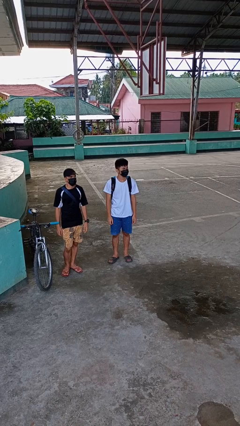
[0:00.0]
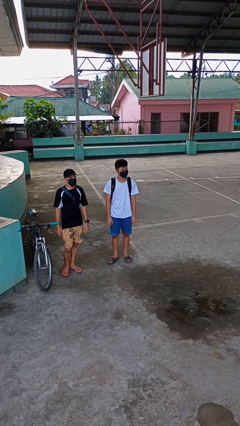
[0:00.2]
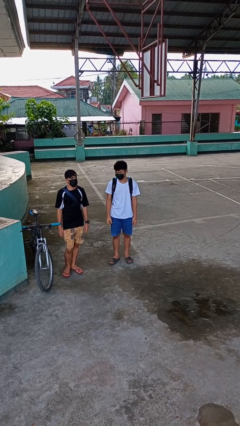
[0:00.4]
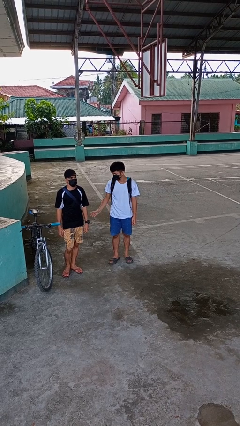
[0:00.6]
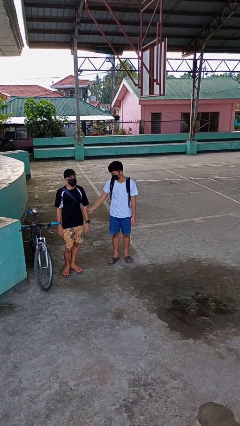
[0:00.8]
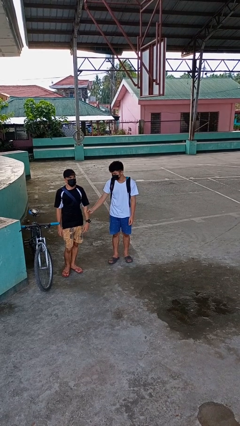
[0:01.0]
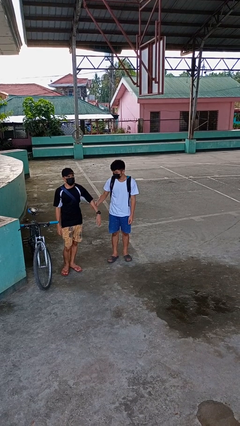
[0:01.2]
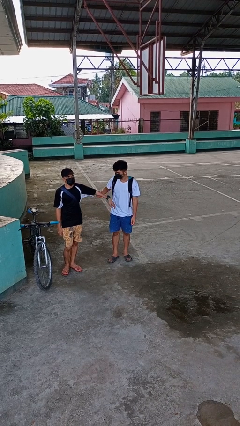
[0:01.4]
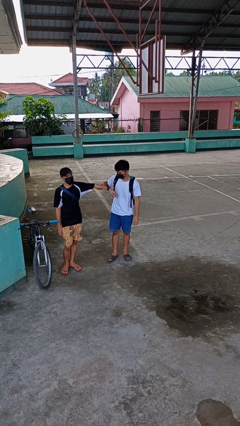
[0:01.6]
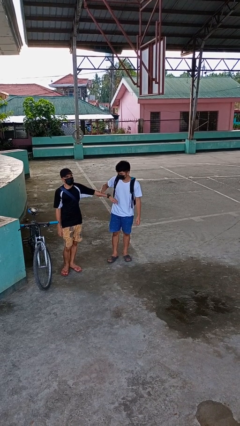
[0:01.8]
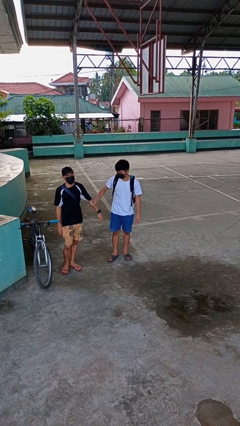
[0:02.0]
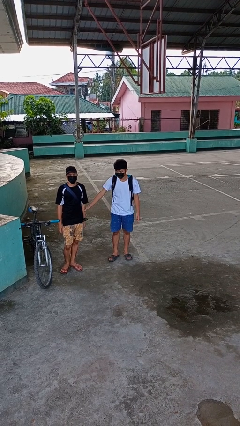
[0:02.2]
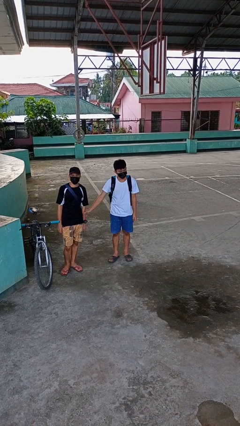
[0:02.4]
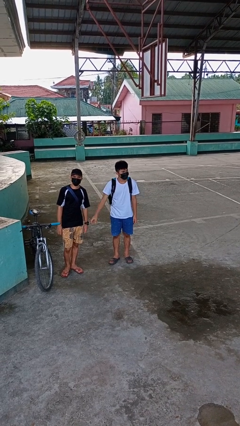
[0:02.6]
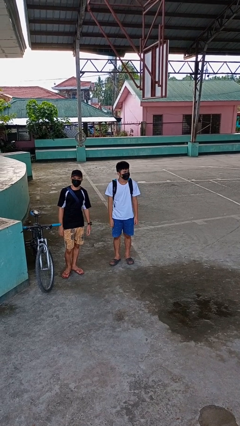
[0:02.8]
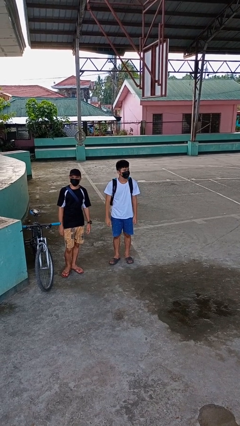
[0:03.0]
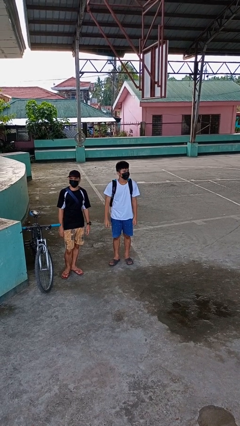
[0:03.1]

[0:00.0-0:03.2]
person grabs person by forearm

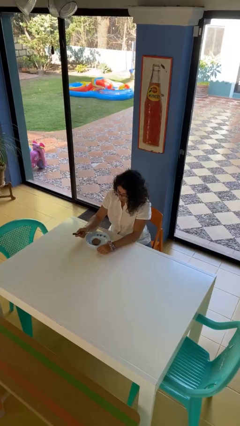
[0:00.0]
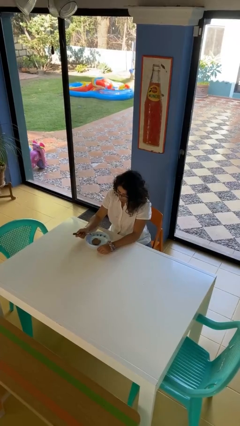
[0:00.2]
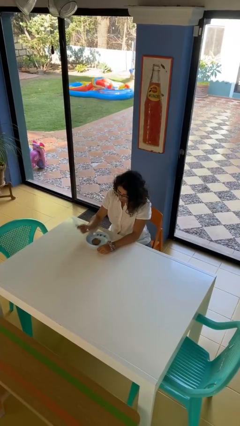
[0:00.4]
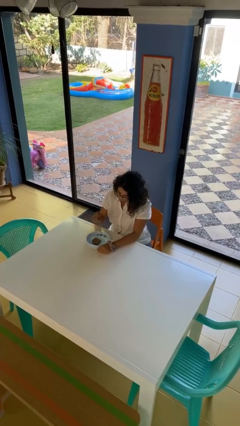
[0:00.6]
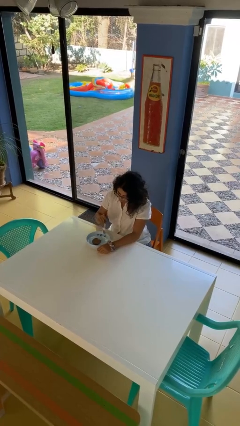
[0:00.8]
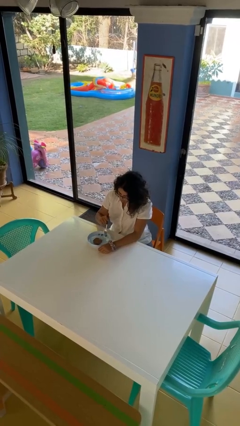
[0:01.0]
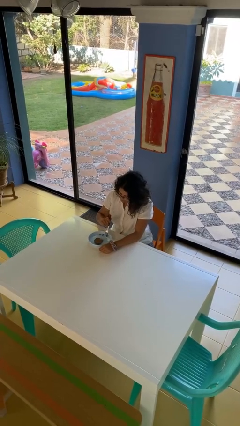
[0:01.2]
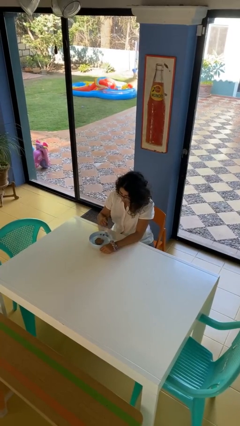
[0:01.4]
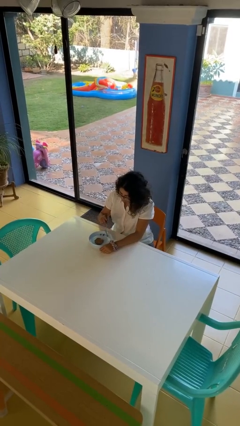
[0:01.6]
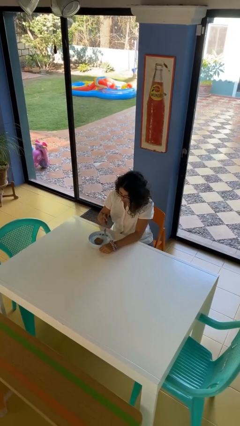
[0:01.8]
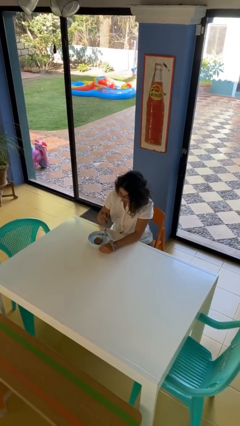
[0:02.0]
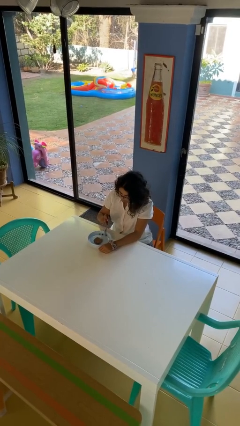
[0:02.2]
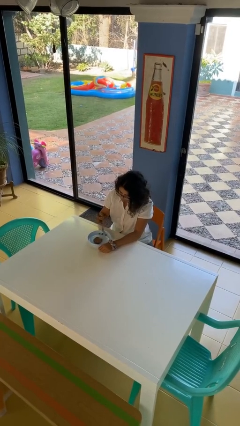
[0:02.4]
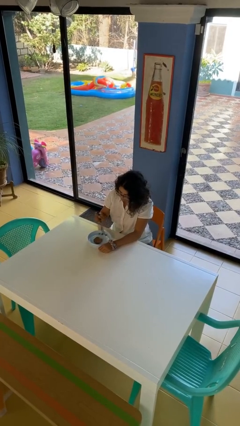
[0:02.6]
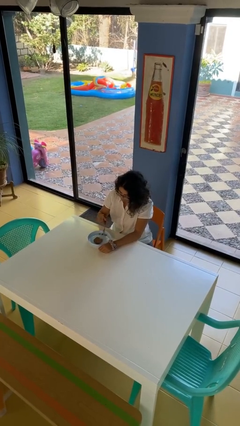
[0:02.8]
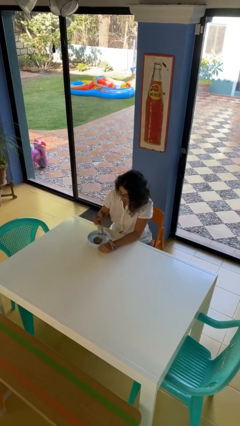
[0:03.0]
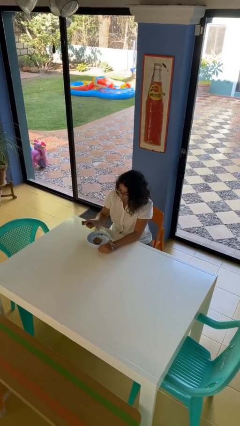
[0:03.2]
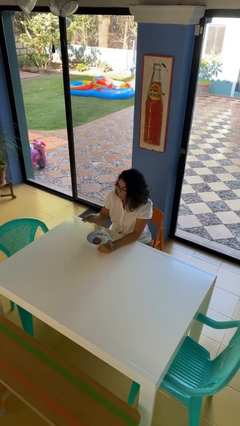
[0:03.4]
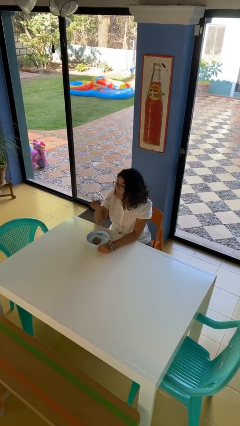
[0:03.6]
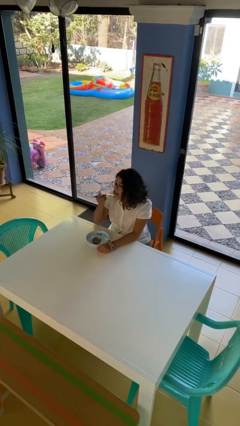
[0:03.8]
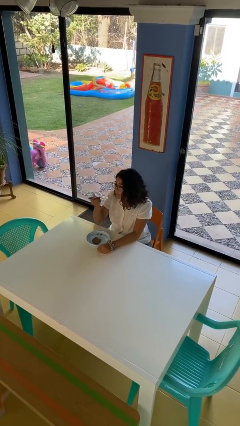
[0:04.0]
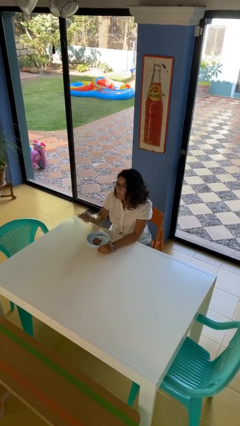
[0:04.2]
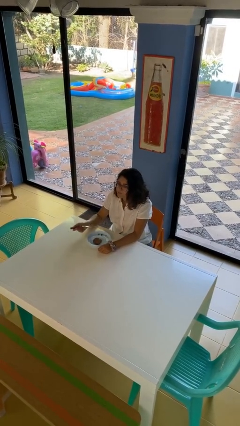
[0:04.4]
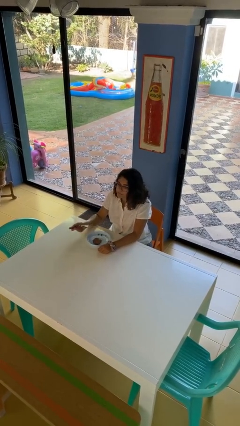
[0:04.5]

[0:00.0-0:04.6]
person eats with utensil

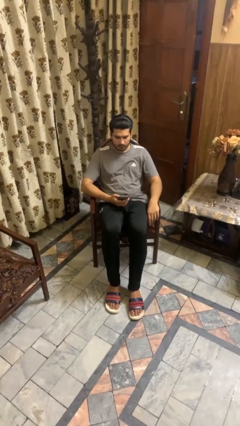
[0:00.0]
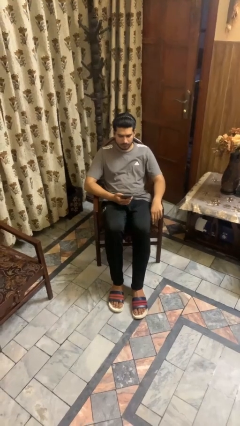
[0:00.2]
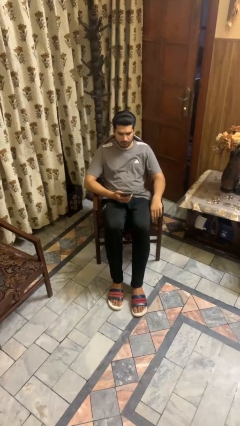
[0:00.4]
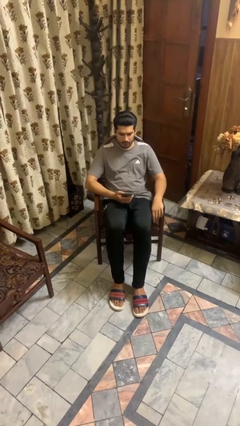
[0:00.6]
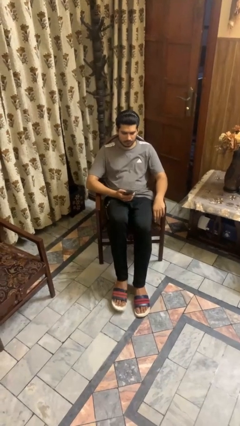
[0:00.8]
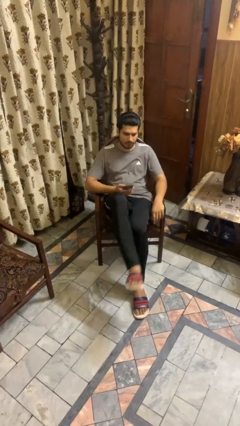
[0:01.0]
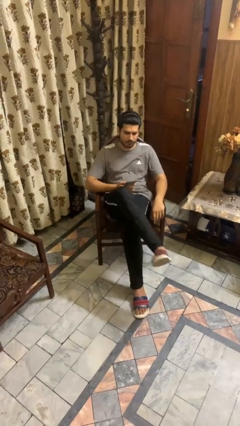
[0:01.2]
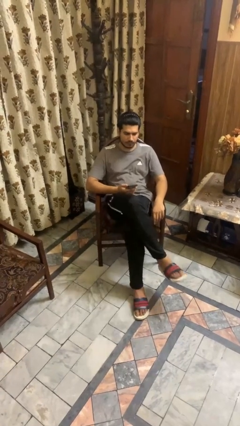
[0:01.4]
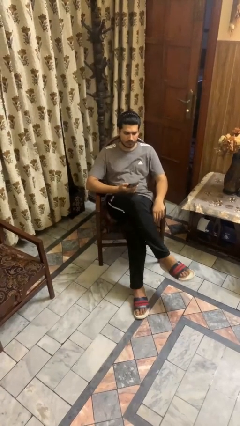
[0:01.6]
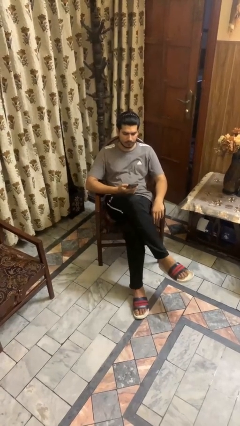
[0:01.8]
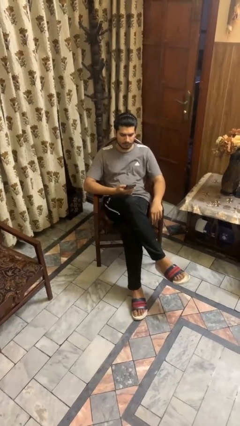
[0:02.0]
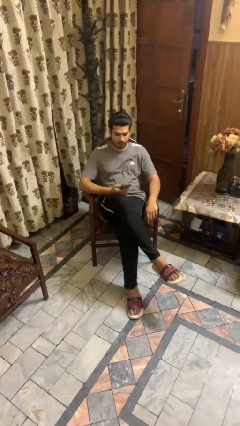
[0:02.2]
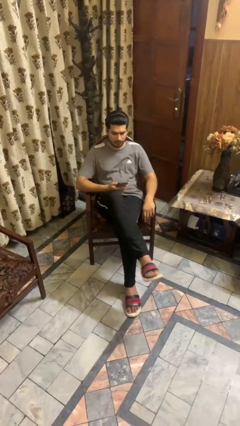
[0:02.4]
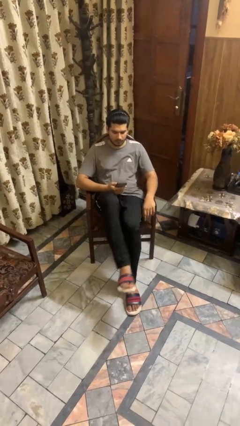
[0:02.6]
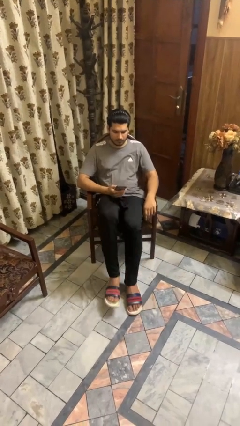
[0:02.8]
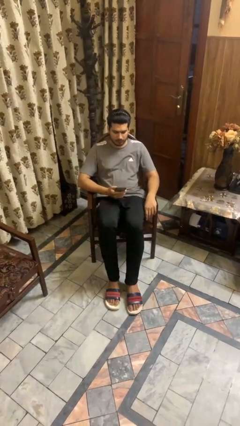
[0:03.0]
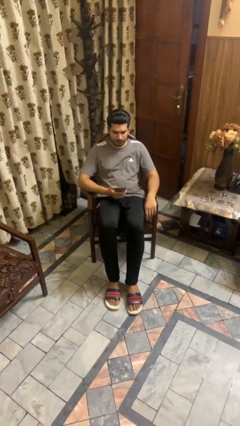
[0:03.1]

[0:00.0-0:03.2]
person crosses legs

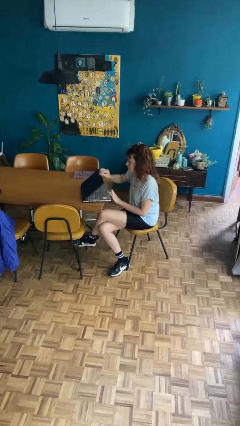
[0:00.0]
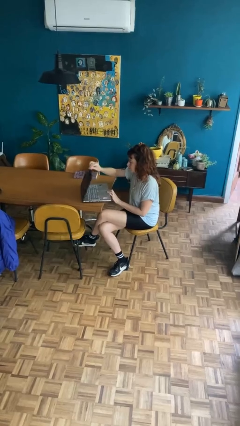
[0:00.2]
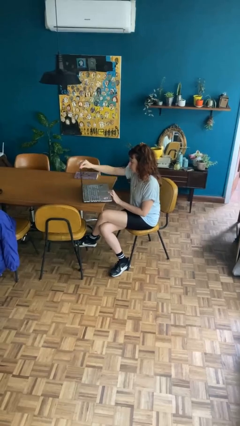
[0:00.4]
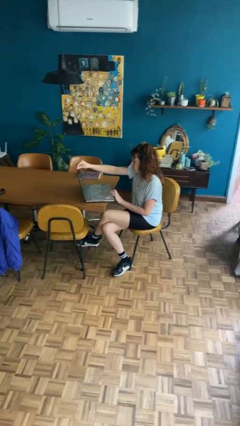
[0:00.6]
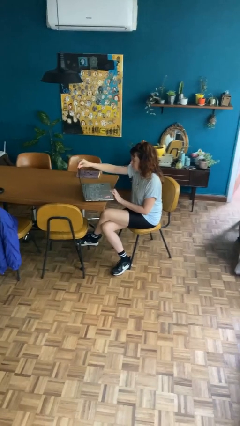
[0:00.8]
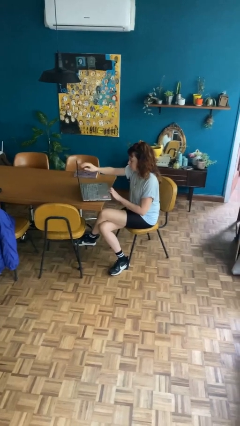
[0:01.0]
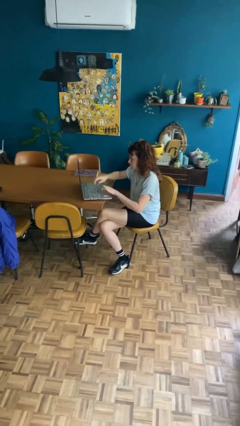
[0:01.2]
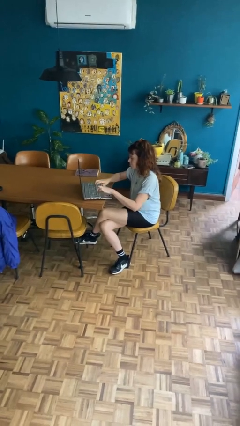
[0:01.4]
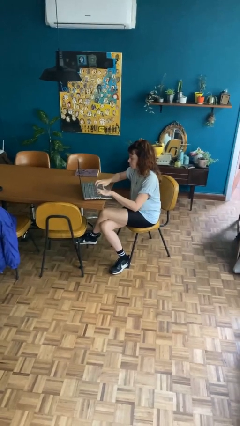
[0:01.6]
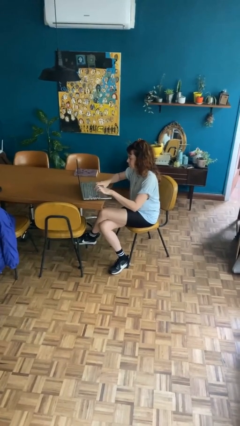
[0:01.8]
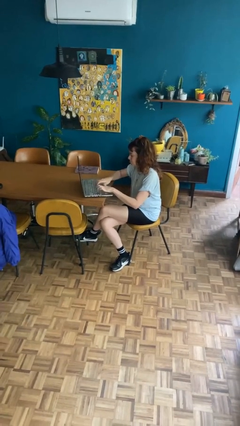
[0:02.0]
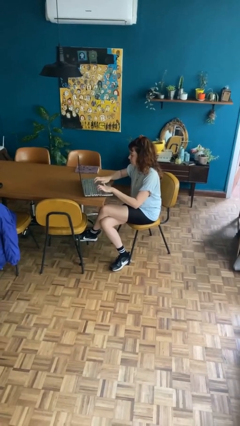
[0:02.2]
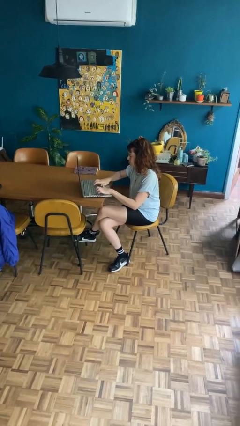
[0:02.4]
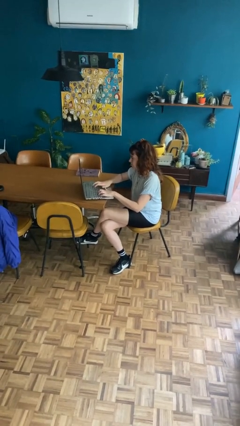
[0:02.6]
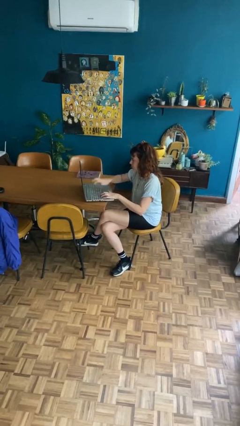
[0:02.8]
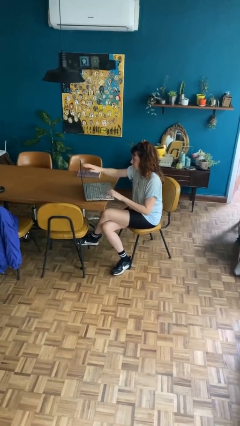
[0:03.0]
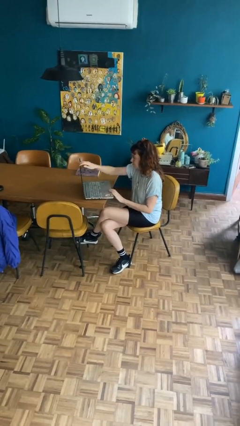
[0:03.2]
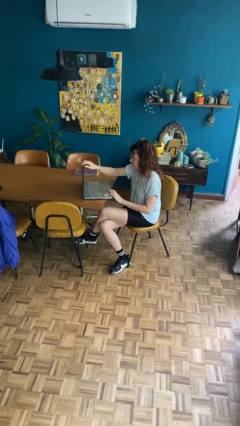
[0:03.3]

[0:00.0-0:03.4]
person interacts with laptop

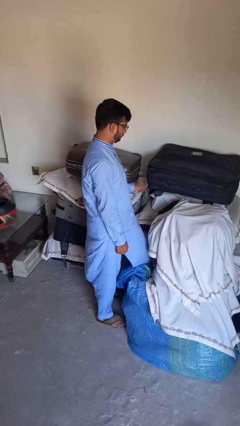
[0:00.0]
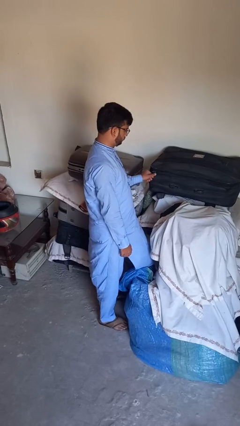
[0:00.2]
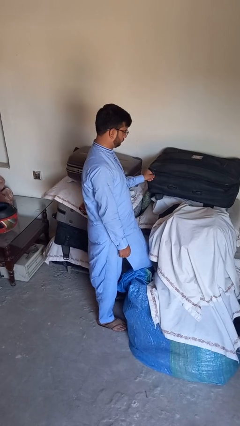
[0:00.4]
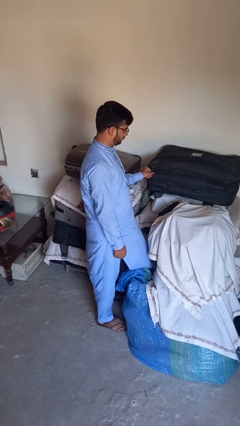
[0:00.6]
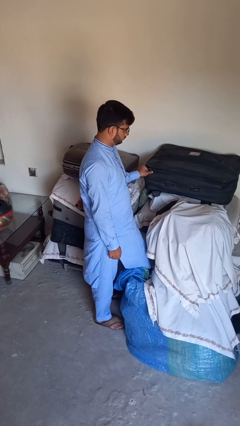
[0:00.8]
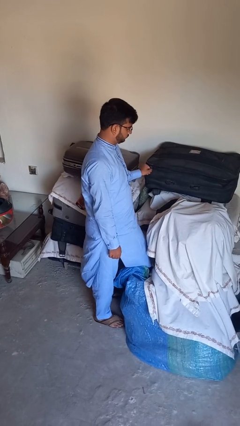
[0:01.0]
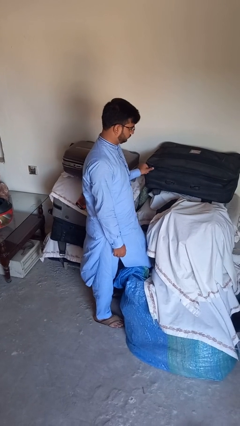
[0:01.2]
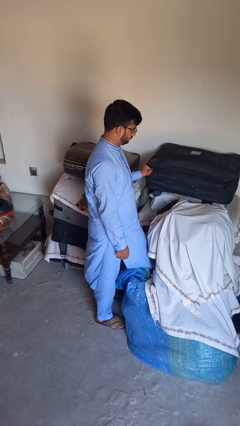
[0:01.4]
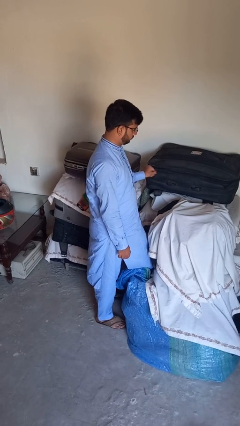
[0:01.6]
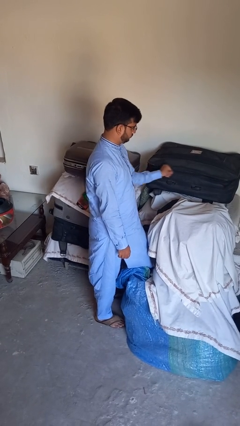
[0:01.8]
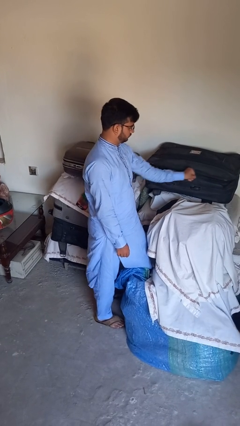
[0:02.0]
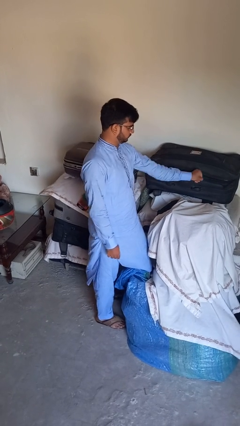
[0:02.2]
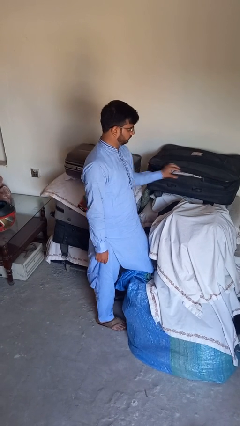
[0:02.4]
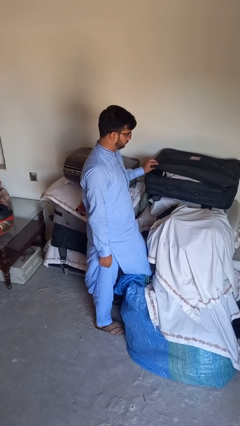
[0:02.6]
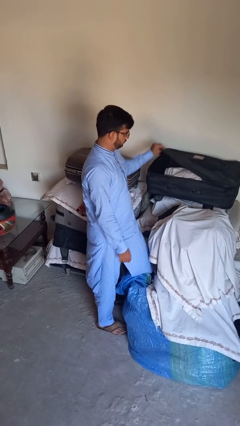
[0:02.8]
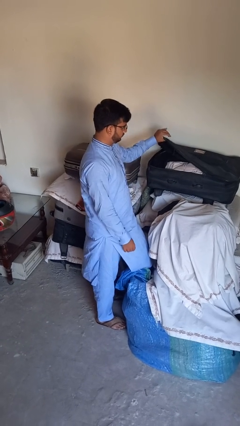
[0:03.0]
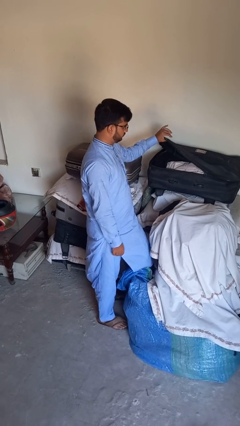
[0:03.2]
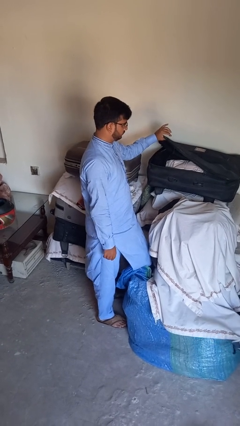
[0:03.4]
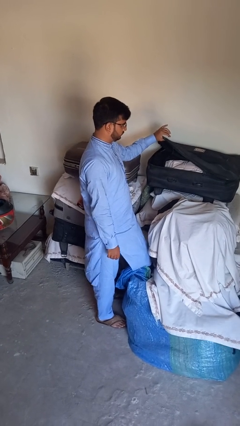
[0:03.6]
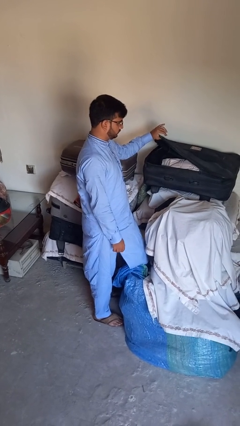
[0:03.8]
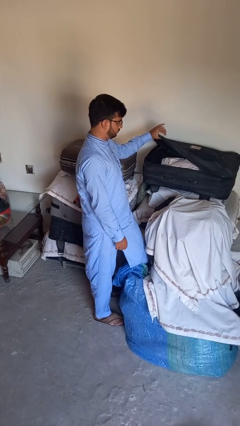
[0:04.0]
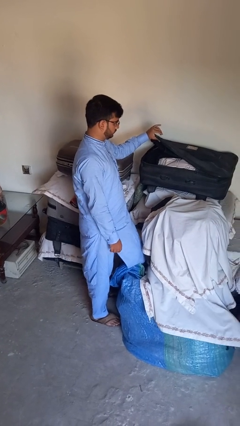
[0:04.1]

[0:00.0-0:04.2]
person opens suitcase
